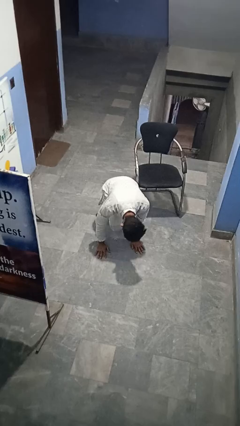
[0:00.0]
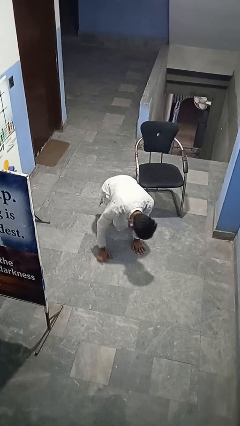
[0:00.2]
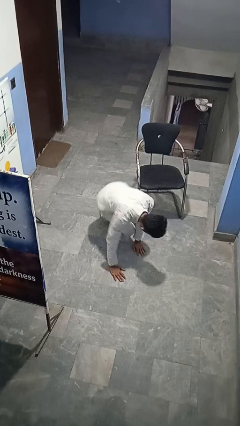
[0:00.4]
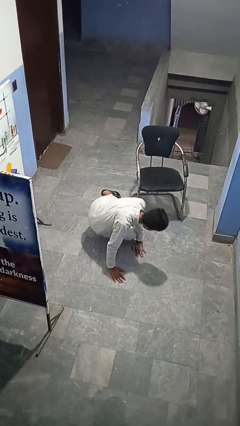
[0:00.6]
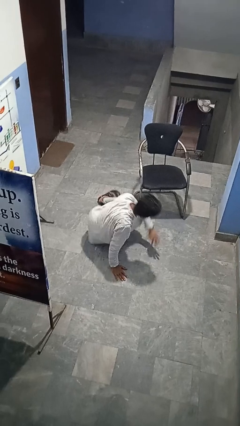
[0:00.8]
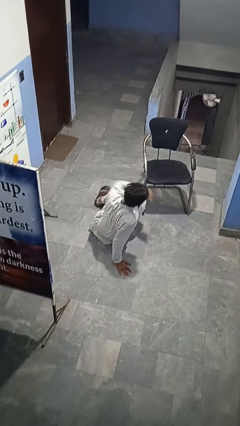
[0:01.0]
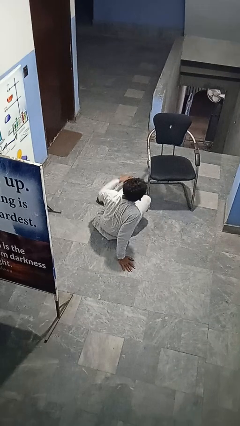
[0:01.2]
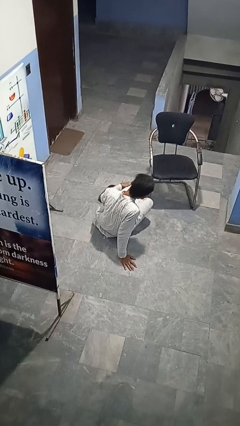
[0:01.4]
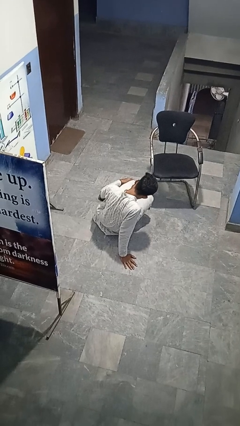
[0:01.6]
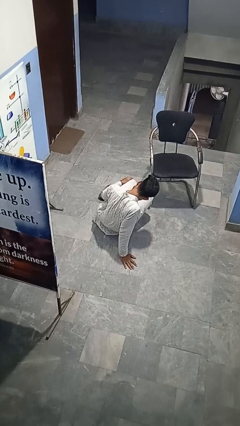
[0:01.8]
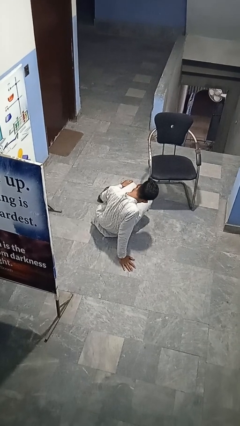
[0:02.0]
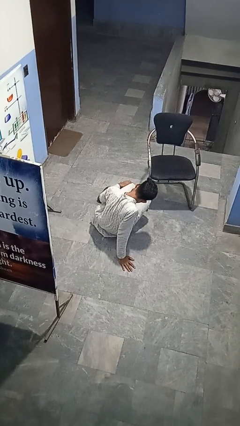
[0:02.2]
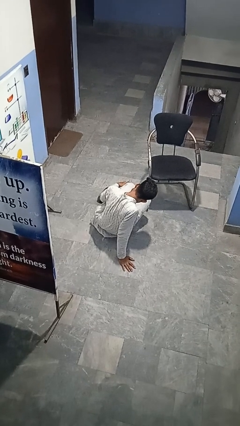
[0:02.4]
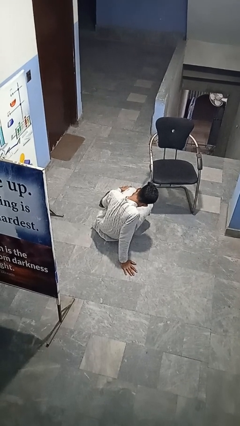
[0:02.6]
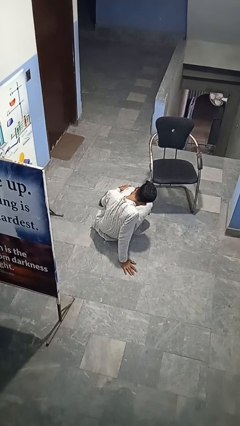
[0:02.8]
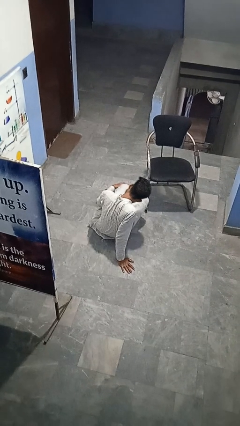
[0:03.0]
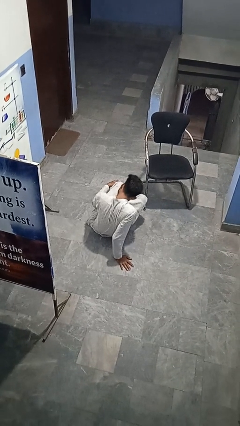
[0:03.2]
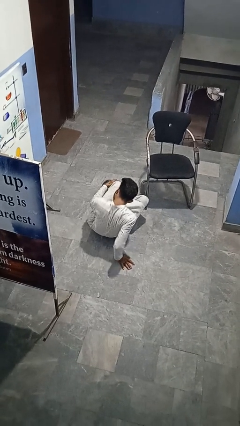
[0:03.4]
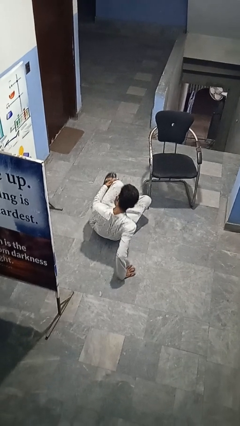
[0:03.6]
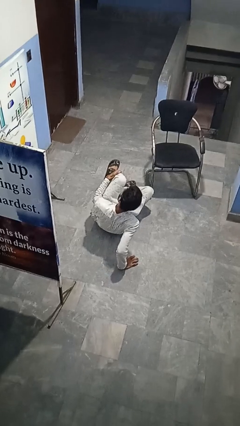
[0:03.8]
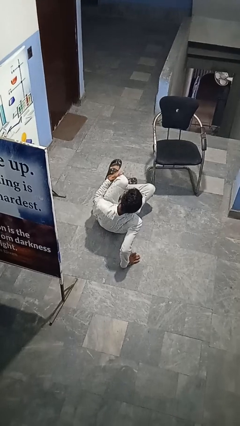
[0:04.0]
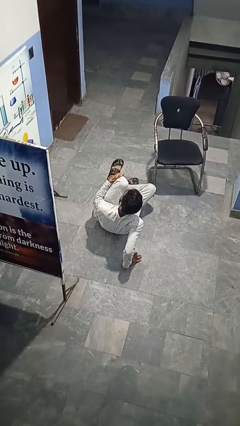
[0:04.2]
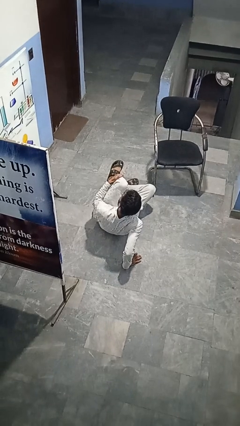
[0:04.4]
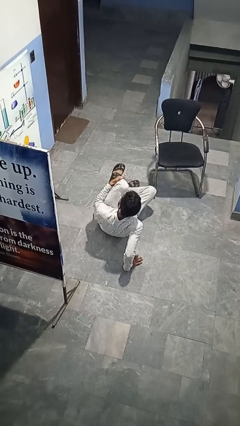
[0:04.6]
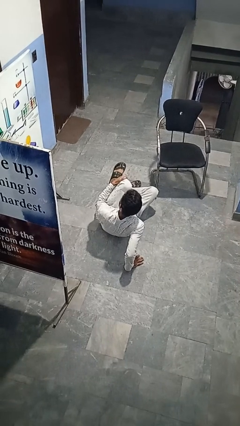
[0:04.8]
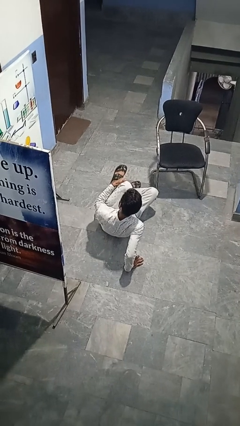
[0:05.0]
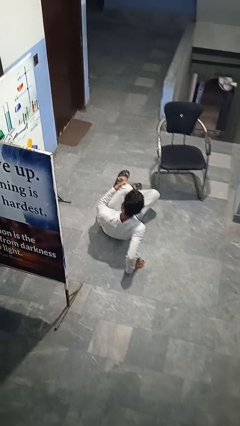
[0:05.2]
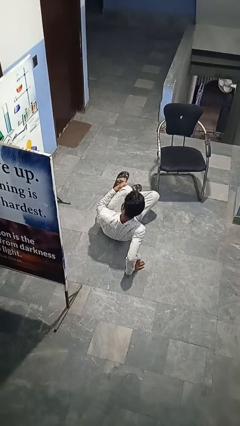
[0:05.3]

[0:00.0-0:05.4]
person lies down on floor

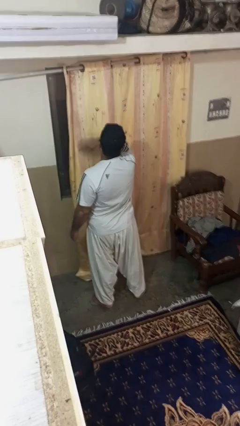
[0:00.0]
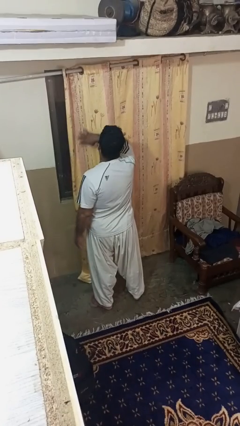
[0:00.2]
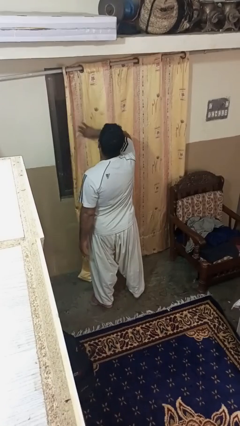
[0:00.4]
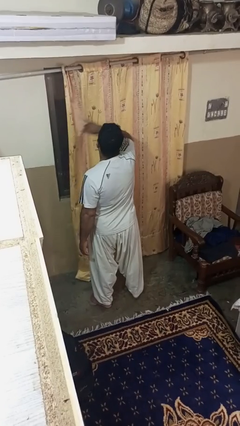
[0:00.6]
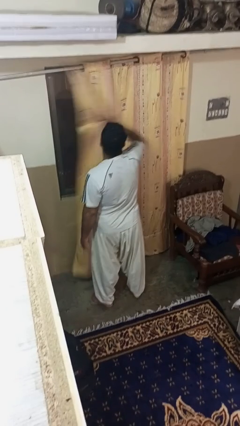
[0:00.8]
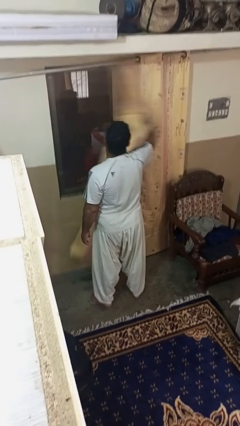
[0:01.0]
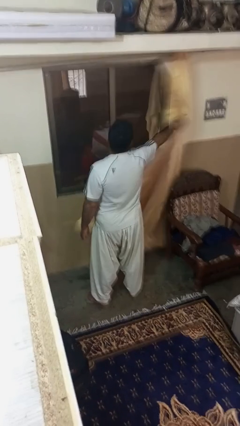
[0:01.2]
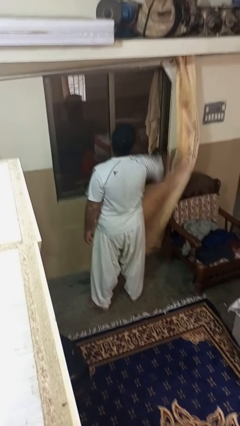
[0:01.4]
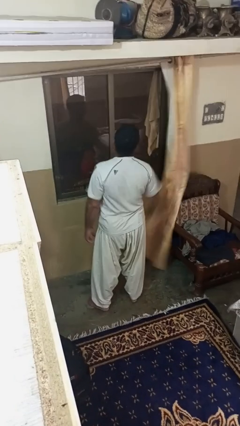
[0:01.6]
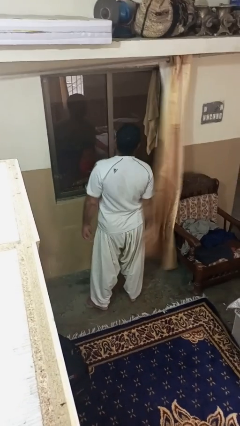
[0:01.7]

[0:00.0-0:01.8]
person opens curtains

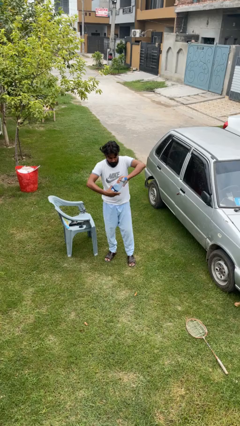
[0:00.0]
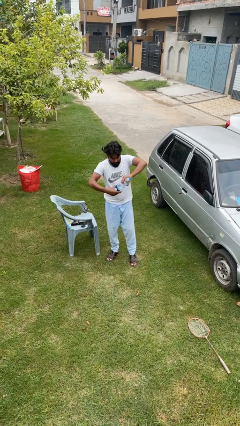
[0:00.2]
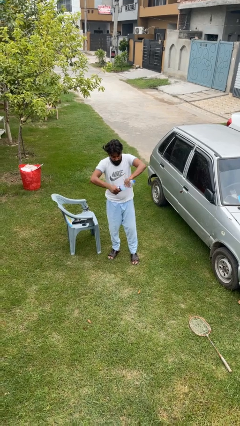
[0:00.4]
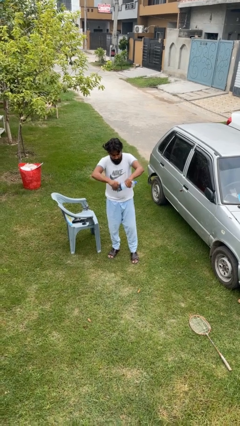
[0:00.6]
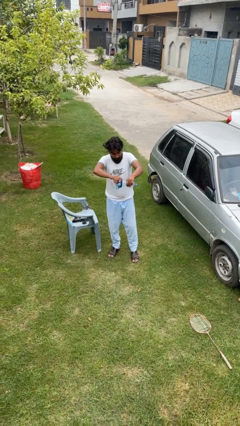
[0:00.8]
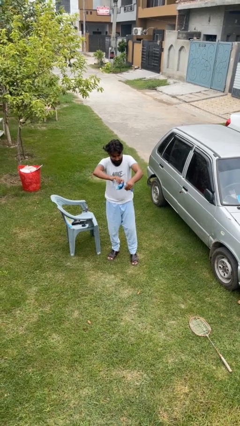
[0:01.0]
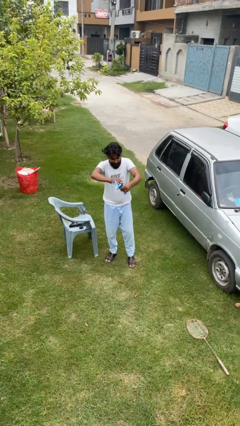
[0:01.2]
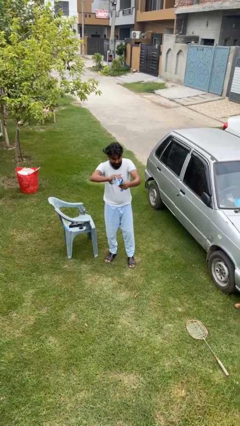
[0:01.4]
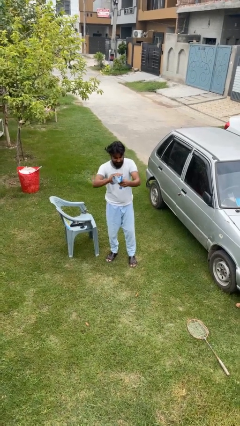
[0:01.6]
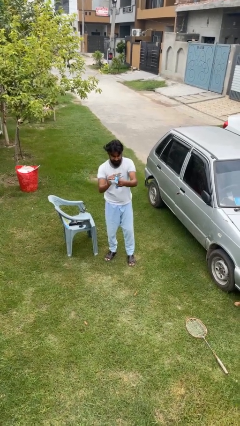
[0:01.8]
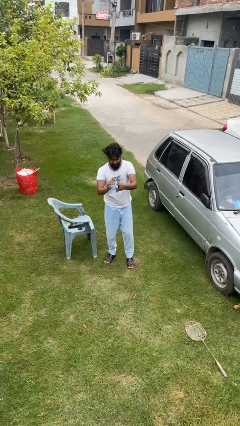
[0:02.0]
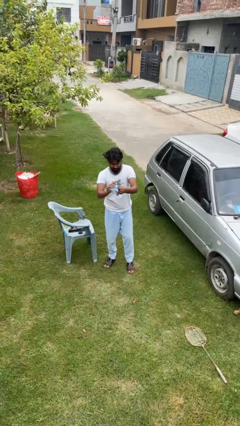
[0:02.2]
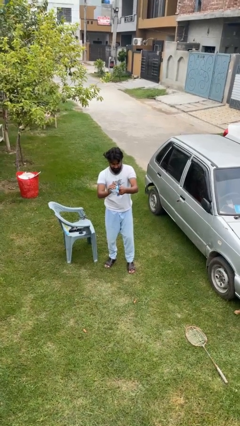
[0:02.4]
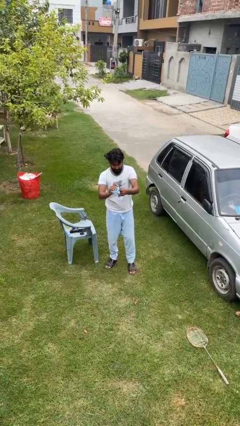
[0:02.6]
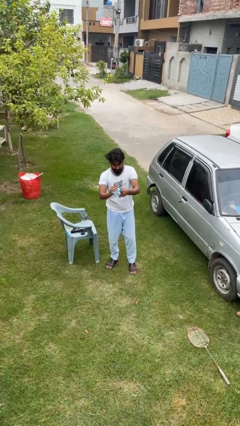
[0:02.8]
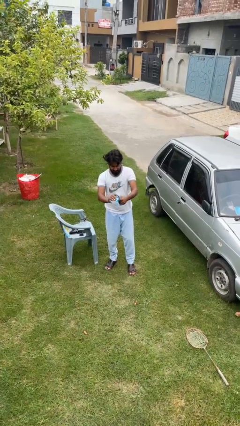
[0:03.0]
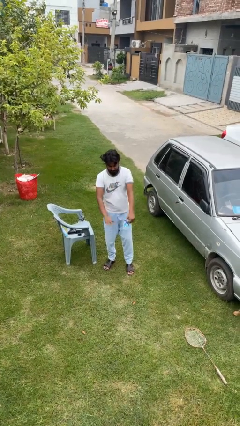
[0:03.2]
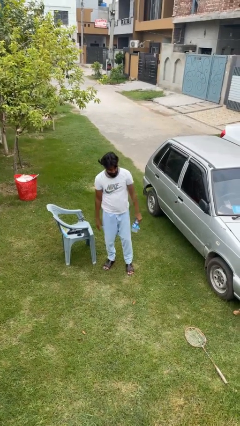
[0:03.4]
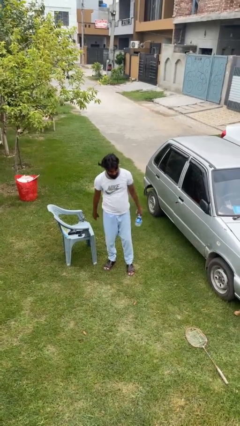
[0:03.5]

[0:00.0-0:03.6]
person squeezes object

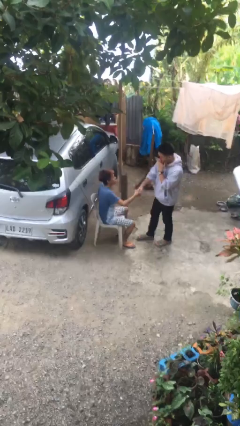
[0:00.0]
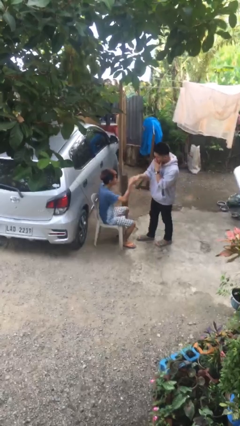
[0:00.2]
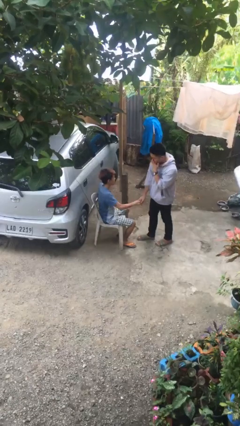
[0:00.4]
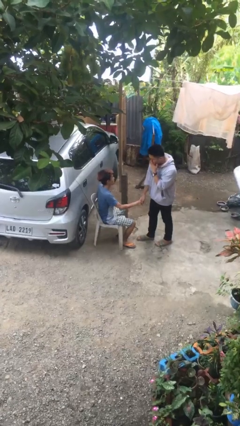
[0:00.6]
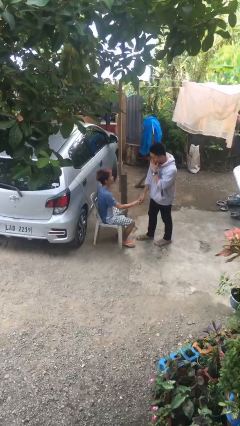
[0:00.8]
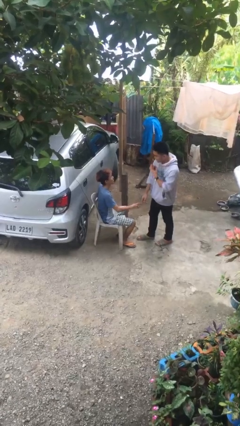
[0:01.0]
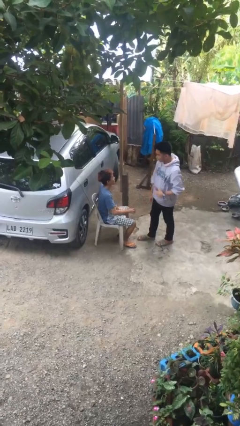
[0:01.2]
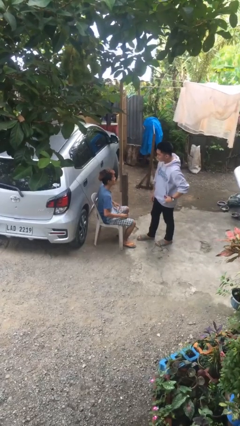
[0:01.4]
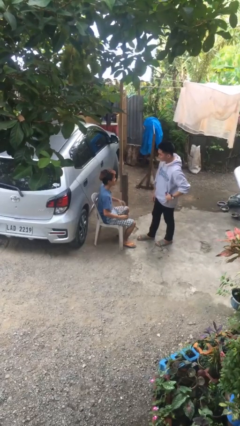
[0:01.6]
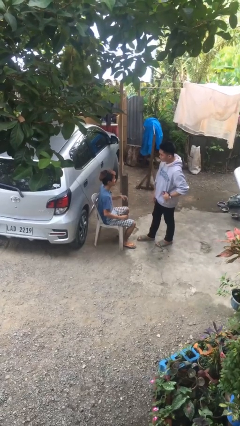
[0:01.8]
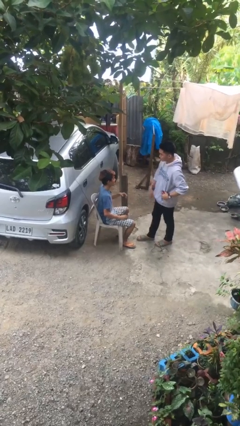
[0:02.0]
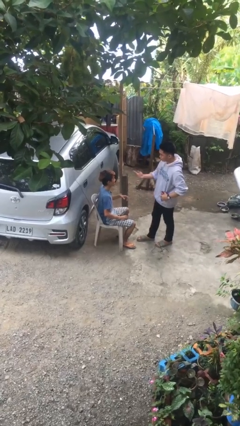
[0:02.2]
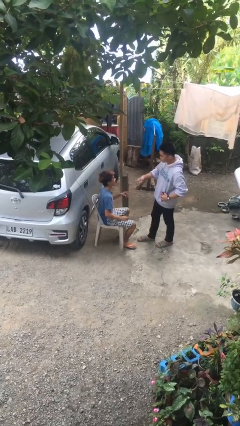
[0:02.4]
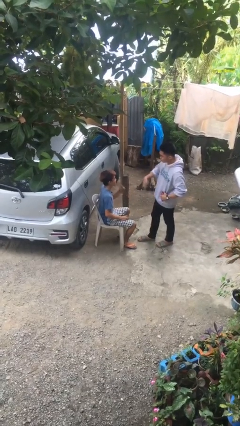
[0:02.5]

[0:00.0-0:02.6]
person shakes hand

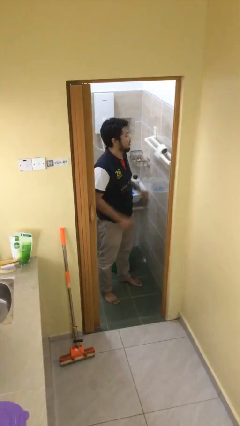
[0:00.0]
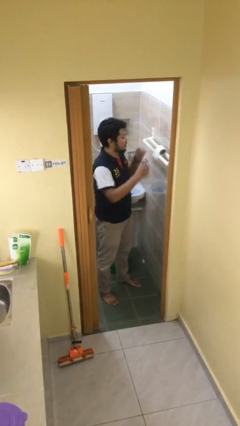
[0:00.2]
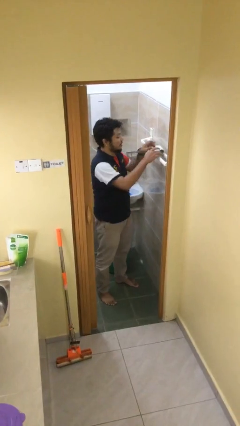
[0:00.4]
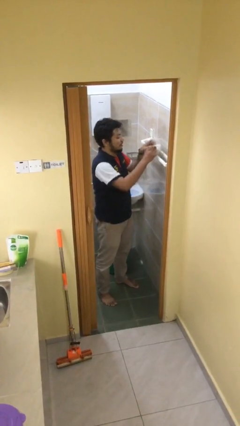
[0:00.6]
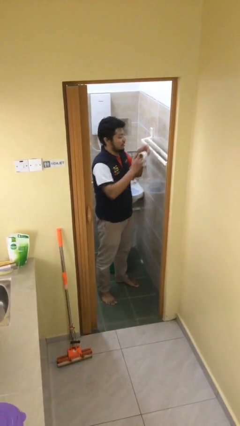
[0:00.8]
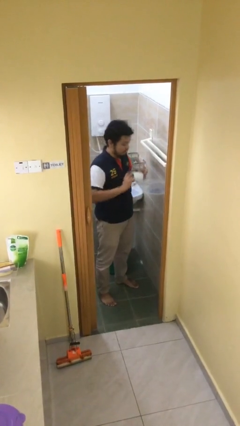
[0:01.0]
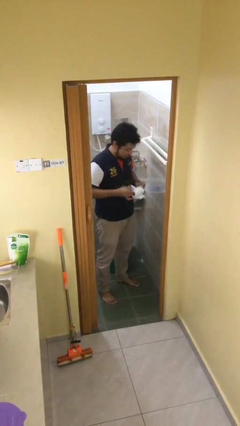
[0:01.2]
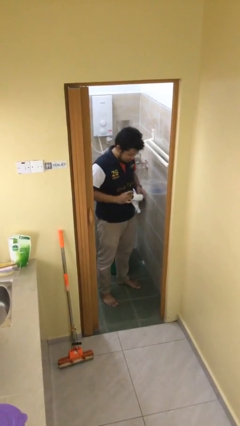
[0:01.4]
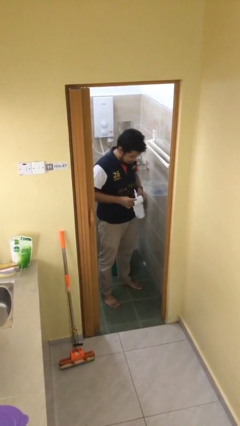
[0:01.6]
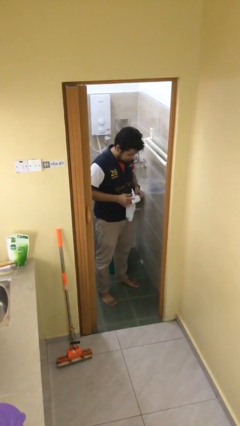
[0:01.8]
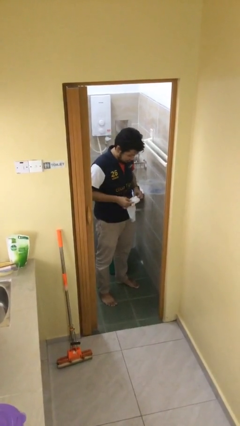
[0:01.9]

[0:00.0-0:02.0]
person picks up object from countertop

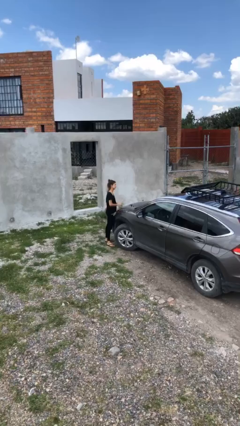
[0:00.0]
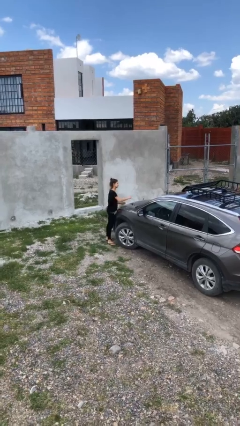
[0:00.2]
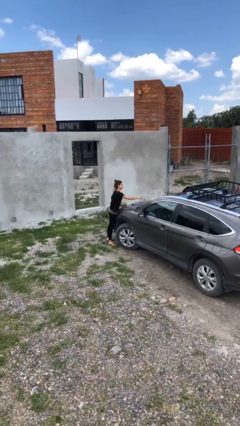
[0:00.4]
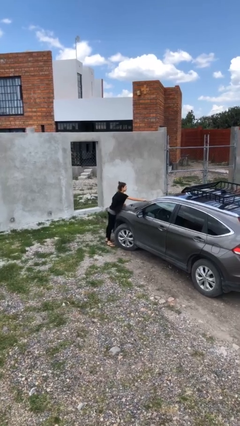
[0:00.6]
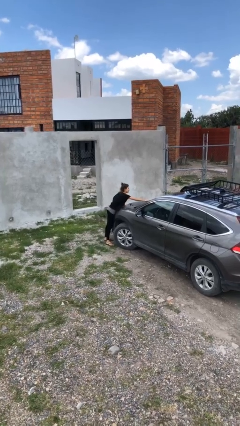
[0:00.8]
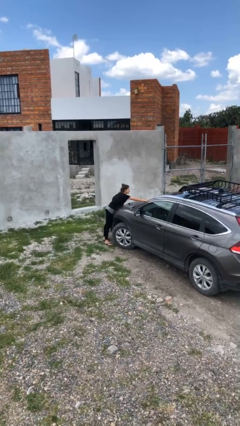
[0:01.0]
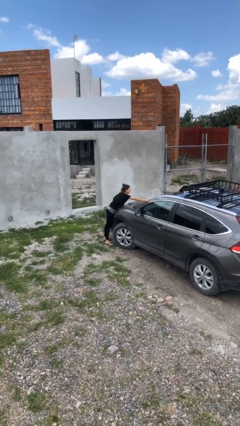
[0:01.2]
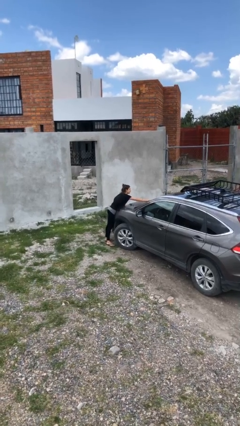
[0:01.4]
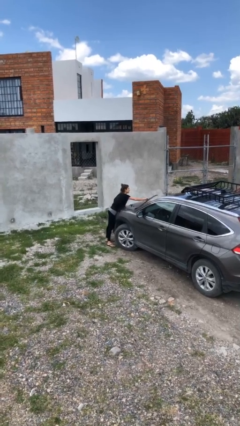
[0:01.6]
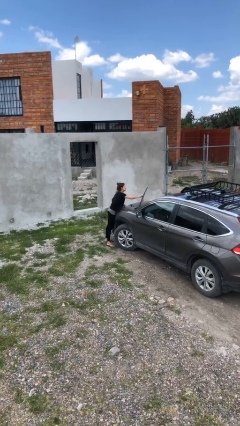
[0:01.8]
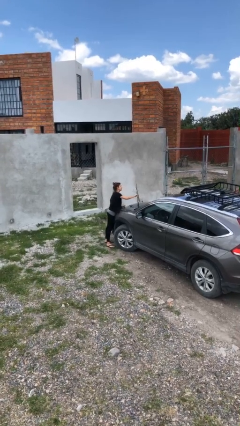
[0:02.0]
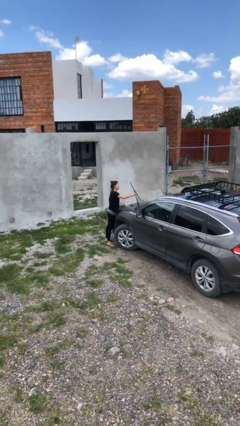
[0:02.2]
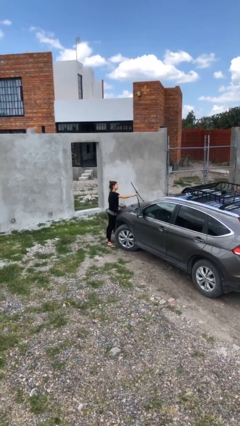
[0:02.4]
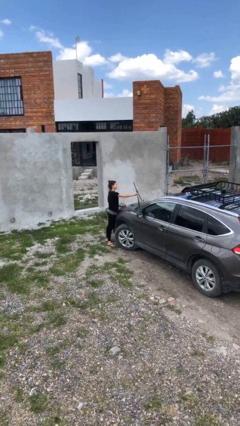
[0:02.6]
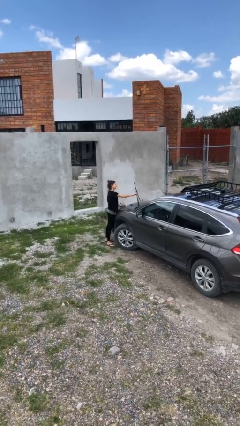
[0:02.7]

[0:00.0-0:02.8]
person flips up car wipers
